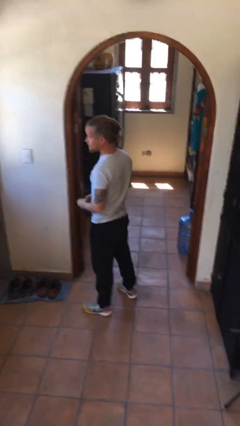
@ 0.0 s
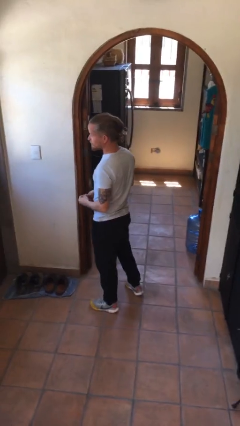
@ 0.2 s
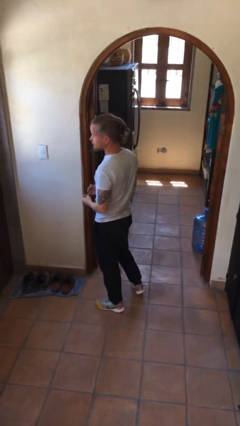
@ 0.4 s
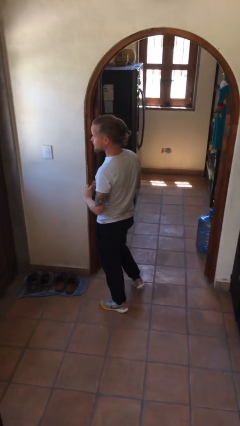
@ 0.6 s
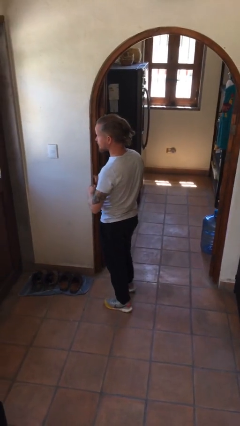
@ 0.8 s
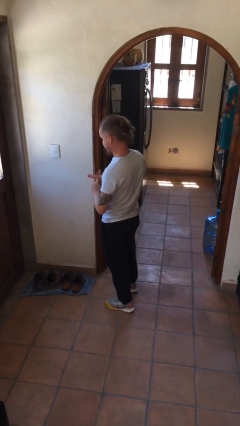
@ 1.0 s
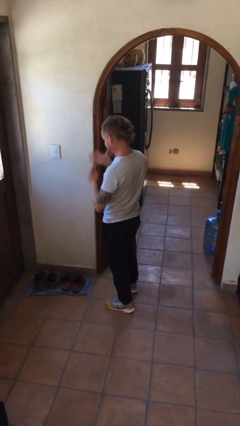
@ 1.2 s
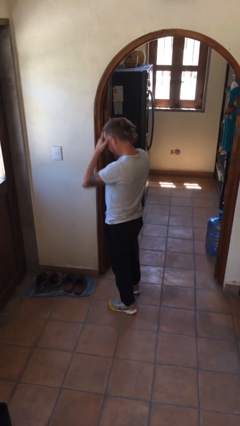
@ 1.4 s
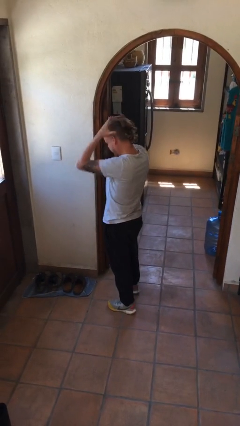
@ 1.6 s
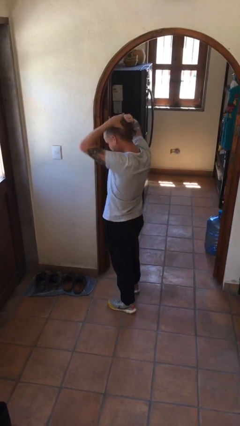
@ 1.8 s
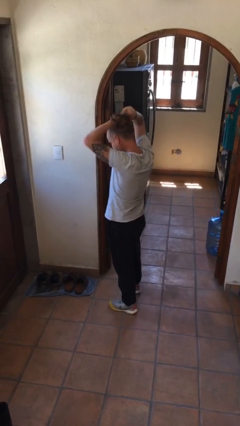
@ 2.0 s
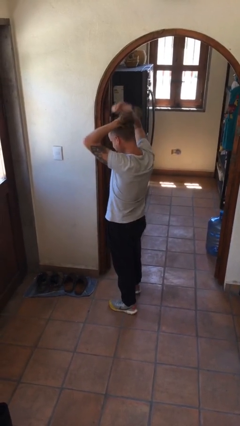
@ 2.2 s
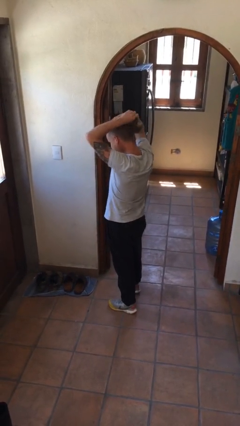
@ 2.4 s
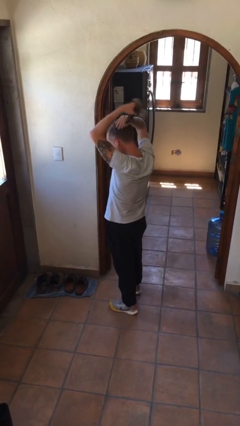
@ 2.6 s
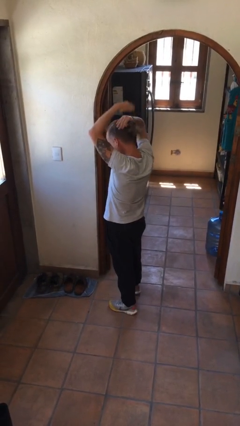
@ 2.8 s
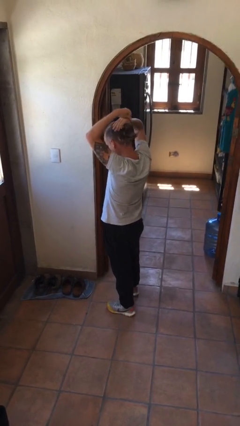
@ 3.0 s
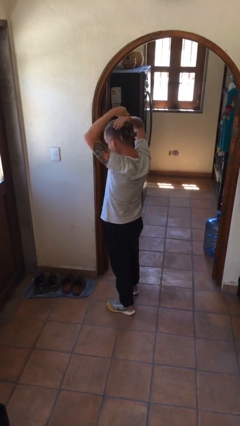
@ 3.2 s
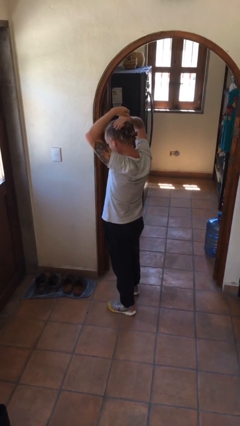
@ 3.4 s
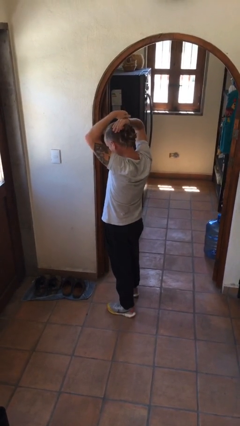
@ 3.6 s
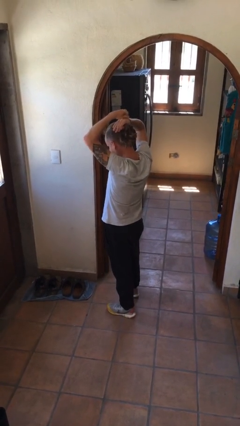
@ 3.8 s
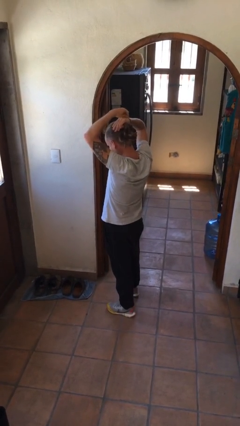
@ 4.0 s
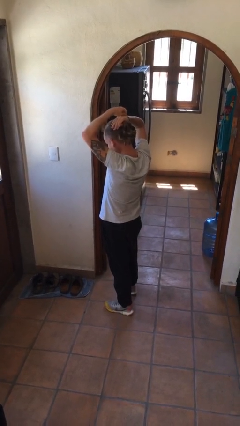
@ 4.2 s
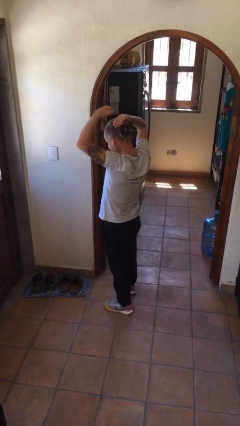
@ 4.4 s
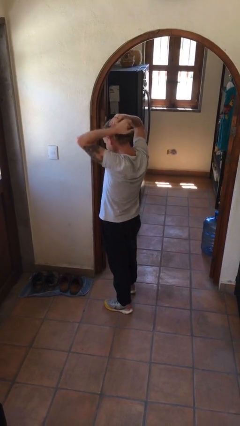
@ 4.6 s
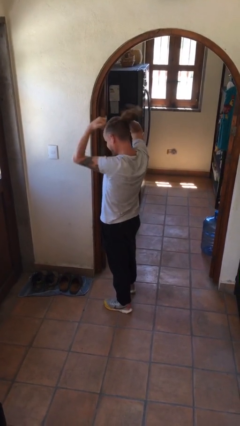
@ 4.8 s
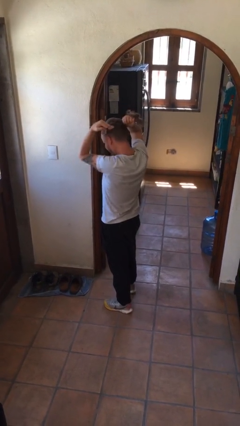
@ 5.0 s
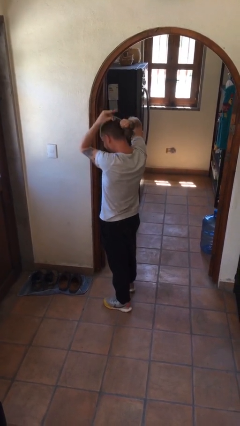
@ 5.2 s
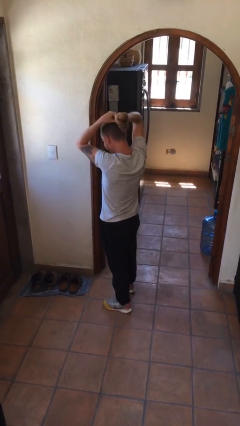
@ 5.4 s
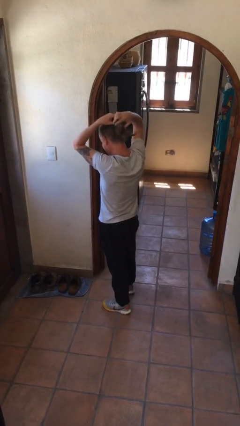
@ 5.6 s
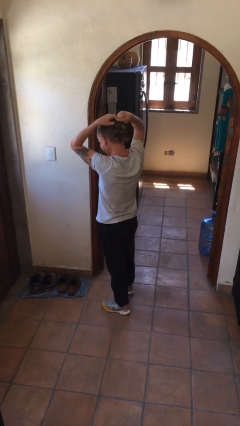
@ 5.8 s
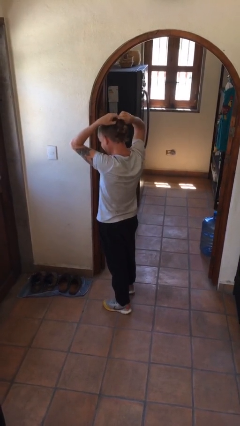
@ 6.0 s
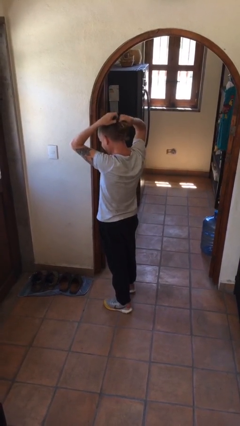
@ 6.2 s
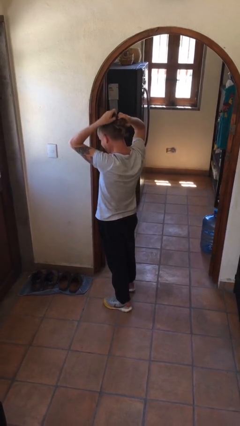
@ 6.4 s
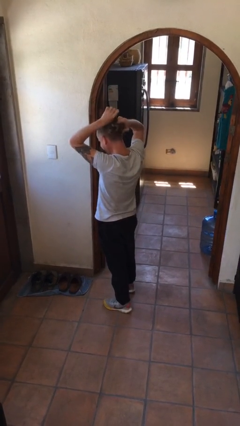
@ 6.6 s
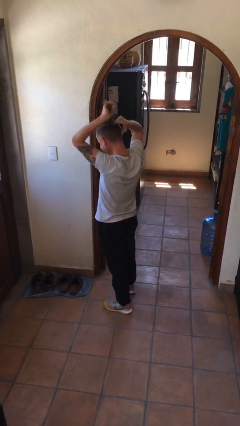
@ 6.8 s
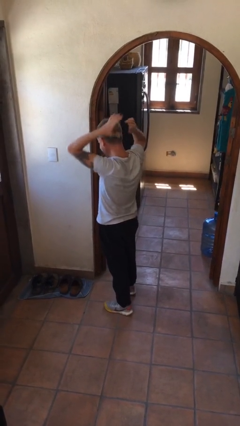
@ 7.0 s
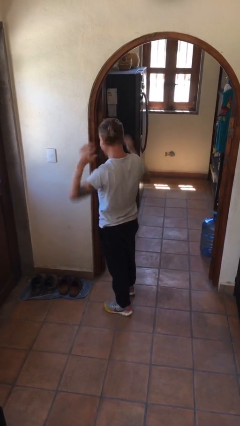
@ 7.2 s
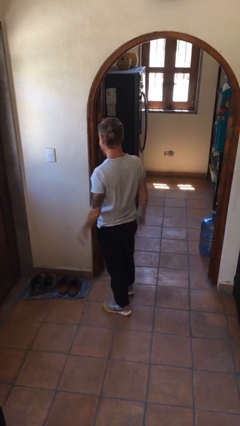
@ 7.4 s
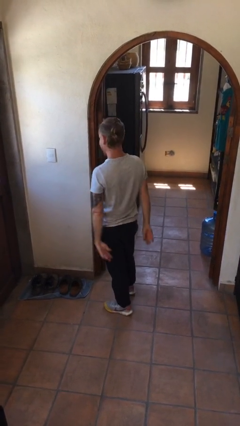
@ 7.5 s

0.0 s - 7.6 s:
person puts hair in ponytail

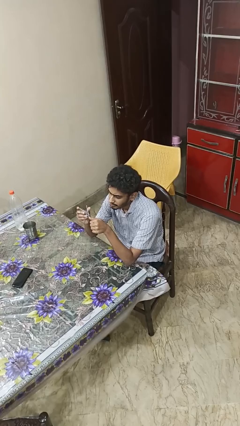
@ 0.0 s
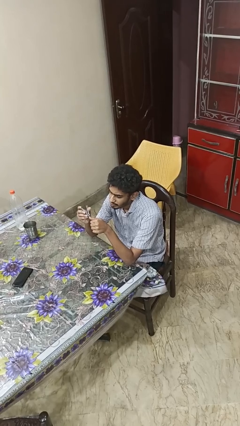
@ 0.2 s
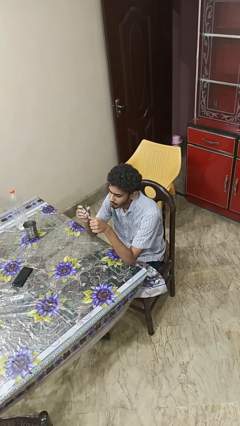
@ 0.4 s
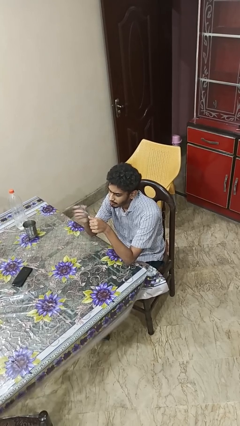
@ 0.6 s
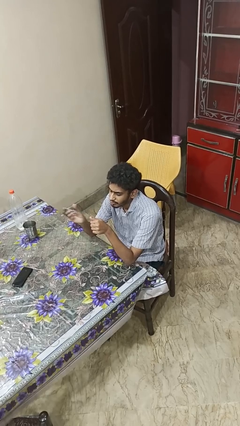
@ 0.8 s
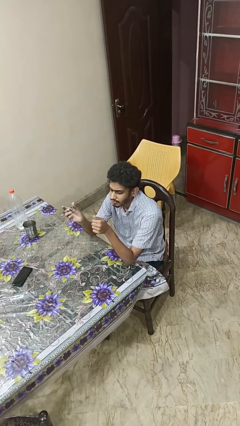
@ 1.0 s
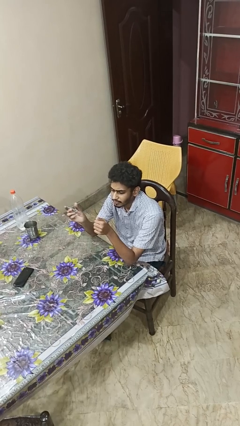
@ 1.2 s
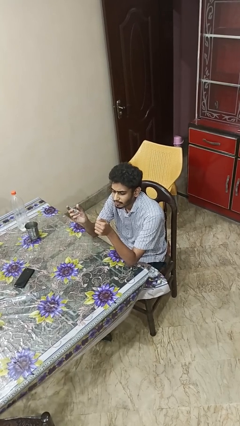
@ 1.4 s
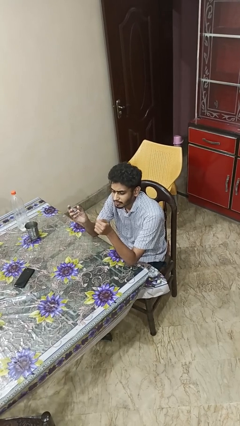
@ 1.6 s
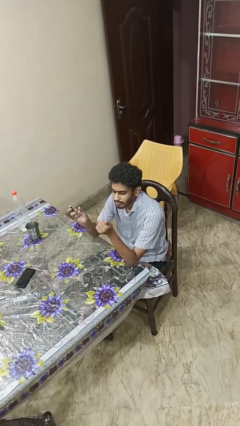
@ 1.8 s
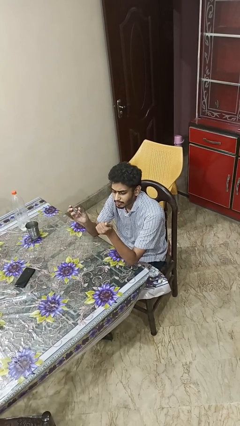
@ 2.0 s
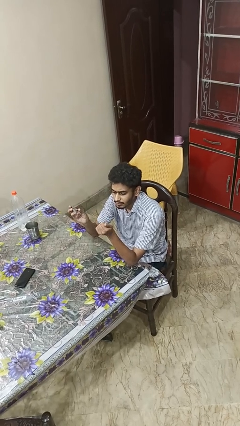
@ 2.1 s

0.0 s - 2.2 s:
person clips fingernails

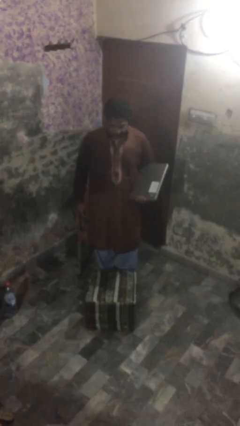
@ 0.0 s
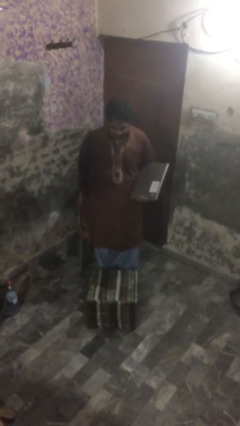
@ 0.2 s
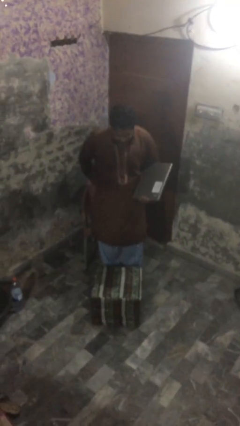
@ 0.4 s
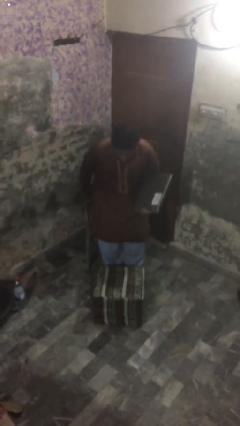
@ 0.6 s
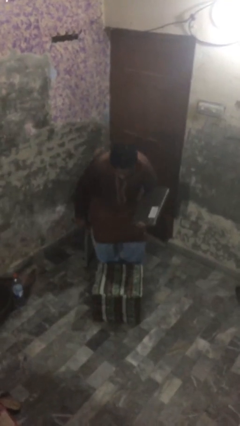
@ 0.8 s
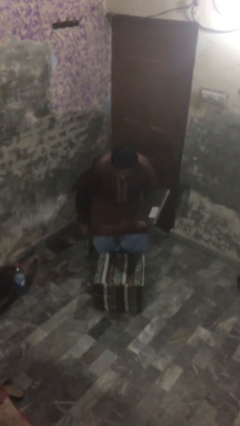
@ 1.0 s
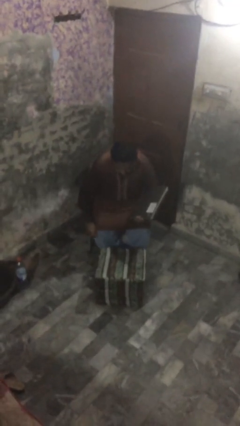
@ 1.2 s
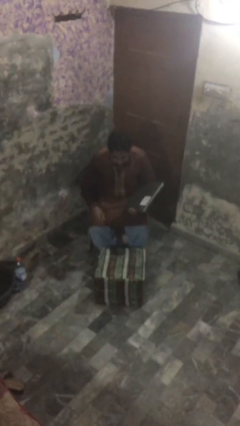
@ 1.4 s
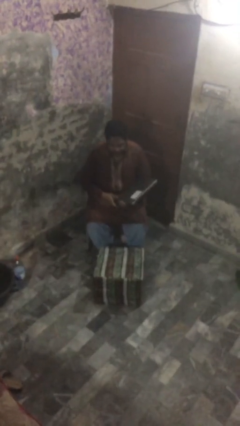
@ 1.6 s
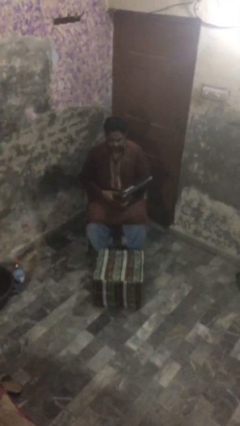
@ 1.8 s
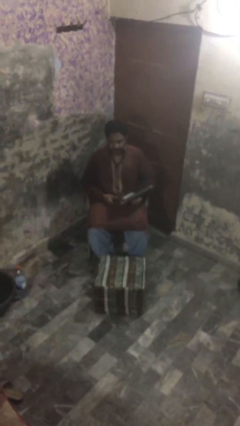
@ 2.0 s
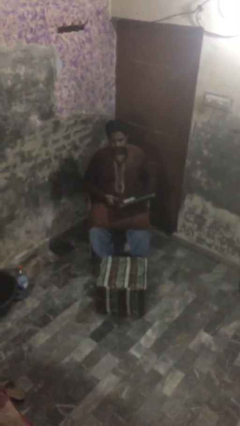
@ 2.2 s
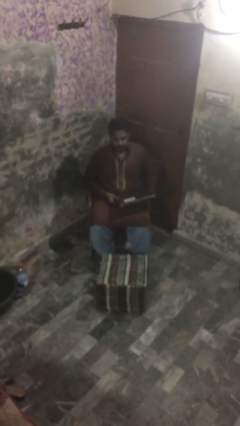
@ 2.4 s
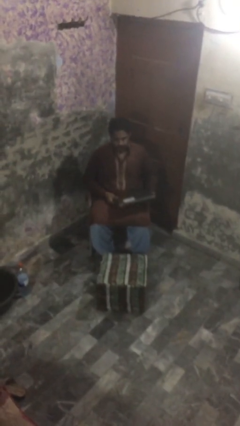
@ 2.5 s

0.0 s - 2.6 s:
person sits down

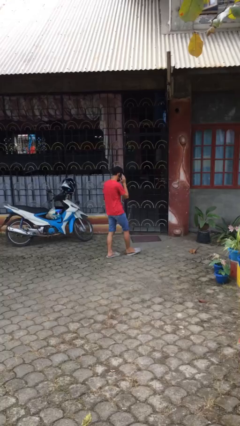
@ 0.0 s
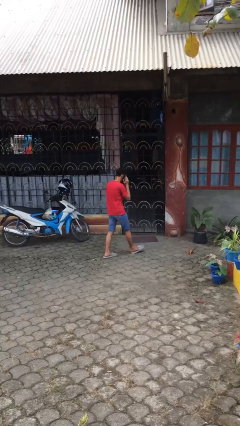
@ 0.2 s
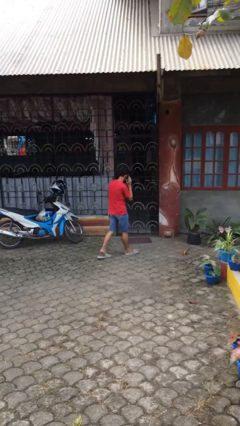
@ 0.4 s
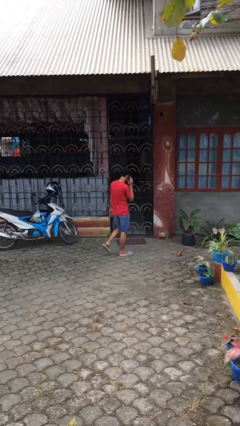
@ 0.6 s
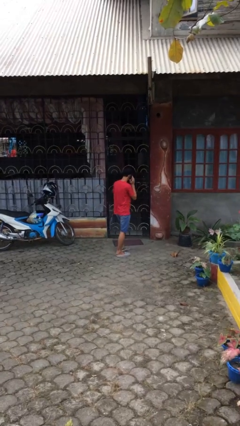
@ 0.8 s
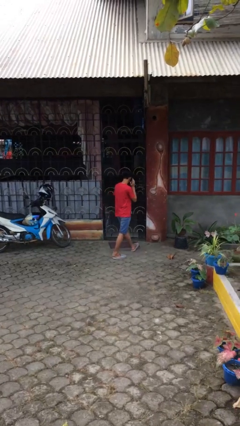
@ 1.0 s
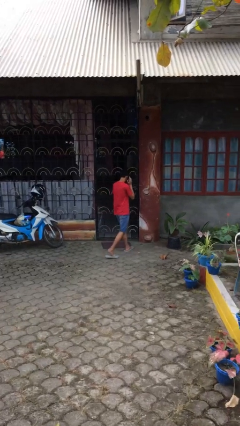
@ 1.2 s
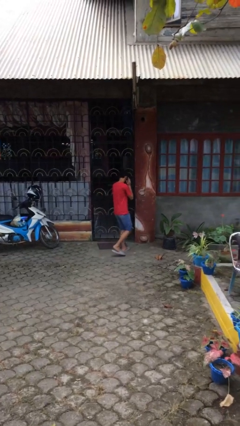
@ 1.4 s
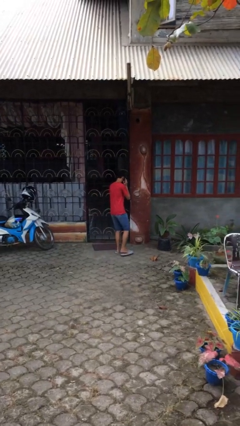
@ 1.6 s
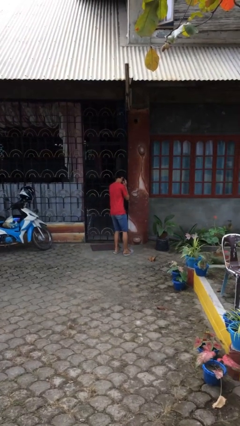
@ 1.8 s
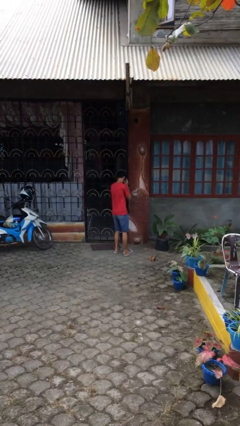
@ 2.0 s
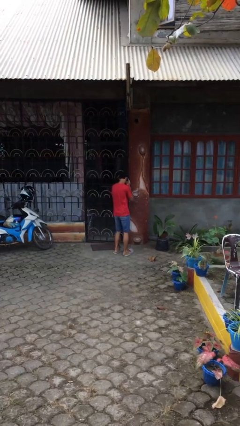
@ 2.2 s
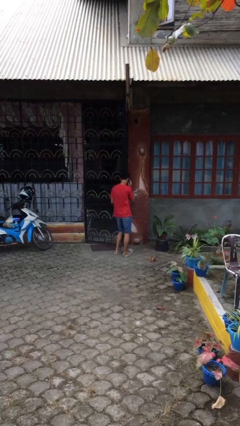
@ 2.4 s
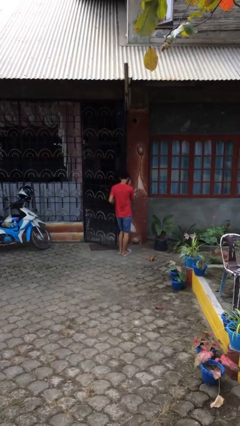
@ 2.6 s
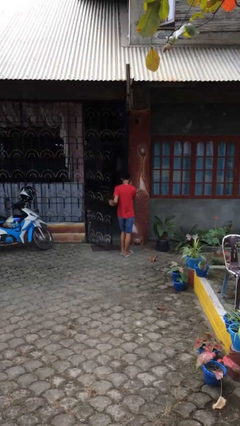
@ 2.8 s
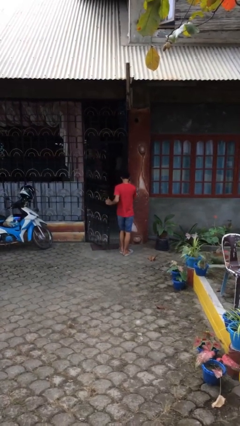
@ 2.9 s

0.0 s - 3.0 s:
person opens facility door

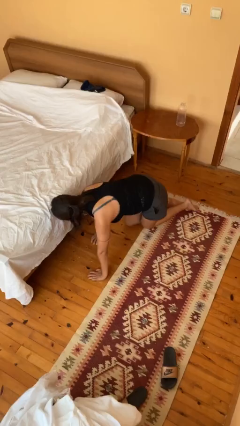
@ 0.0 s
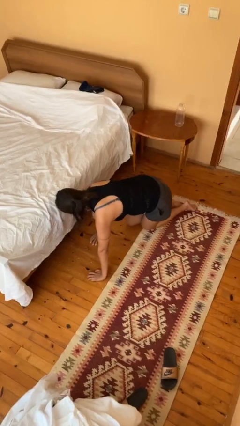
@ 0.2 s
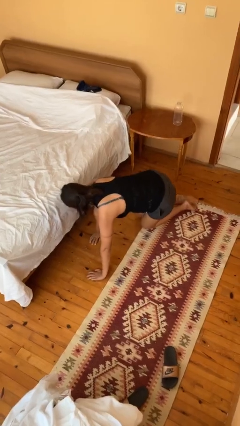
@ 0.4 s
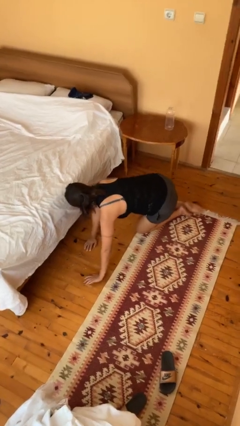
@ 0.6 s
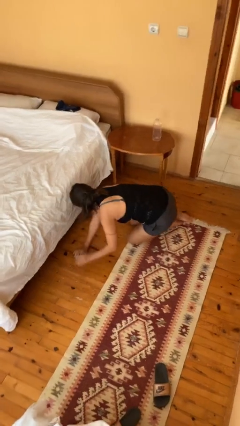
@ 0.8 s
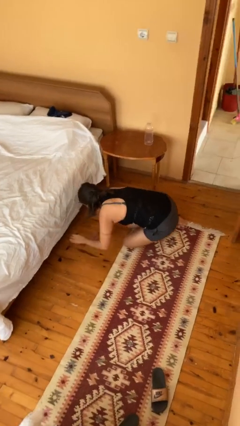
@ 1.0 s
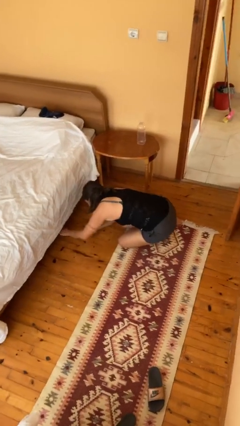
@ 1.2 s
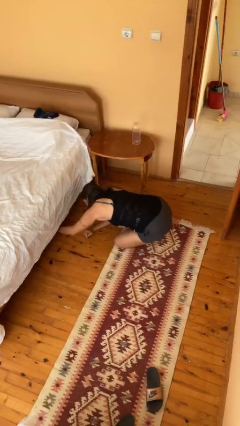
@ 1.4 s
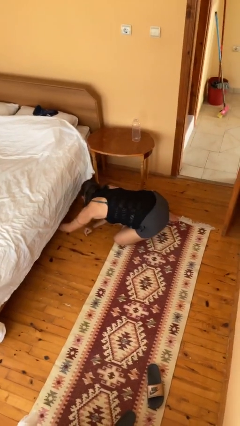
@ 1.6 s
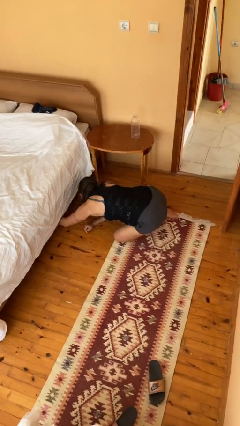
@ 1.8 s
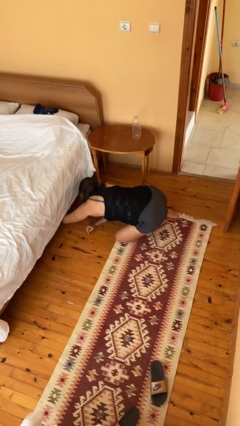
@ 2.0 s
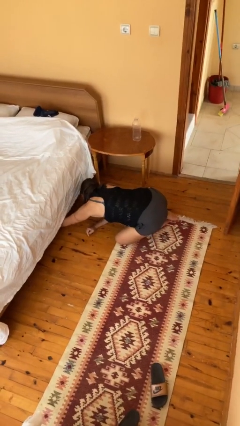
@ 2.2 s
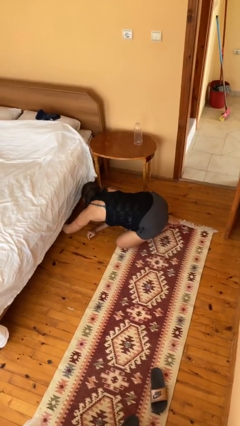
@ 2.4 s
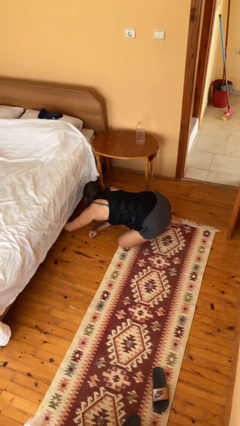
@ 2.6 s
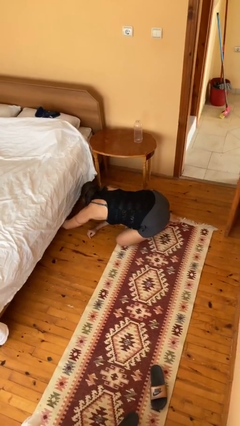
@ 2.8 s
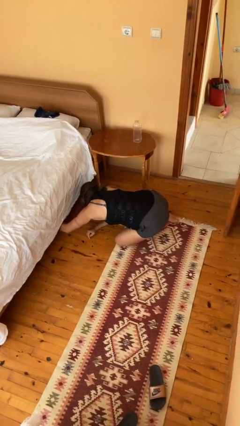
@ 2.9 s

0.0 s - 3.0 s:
person searches under bed
